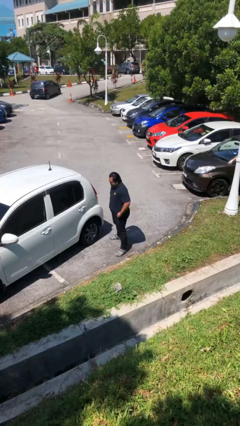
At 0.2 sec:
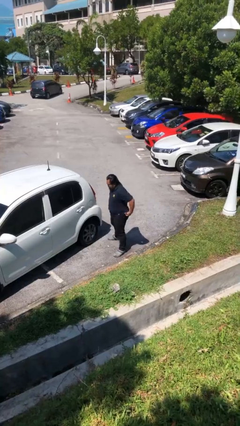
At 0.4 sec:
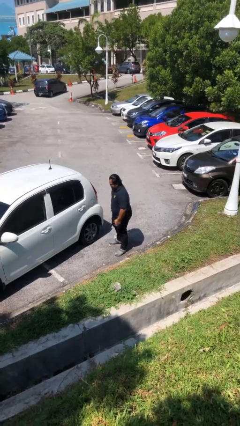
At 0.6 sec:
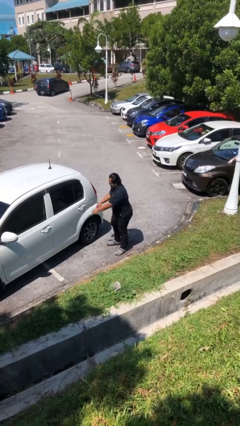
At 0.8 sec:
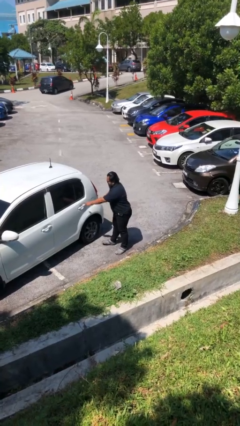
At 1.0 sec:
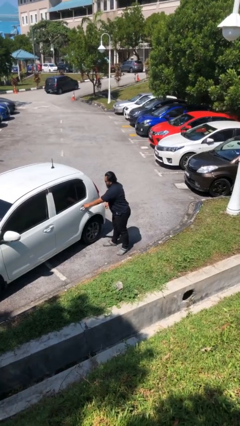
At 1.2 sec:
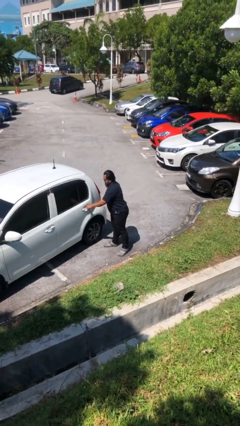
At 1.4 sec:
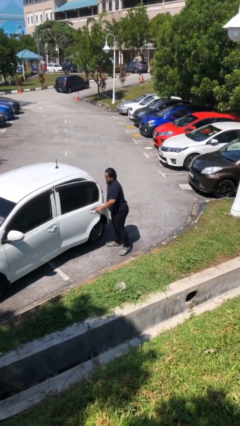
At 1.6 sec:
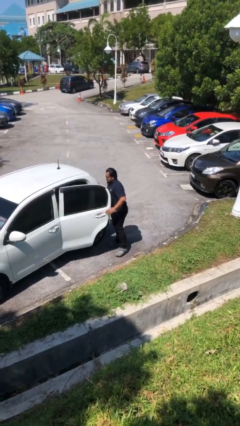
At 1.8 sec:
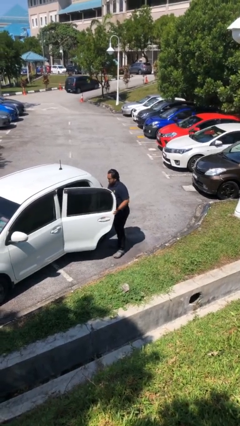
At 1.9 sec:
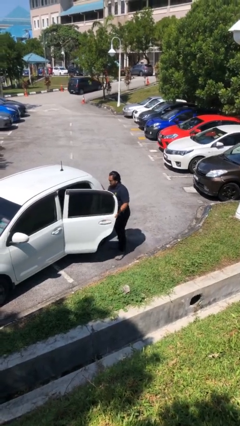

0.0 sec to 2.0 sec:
person opens car door

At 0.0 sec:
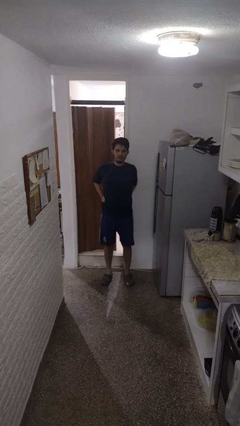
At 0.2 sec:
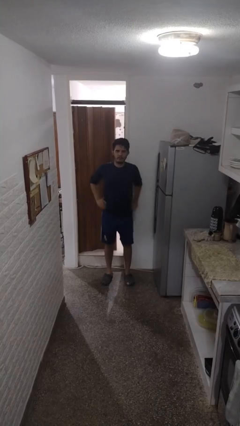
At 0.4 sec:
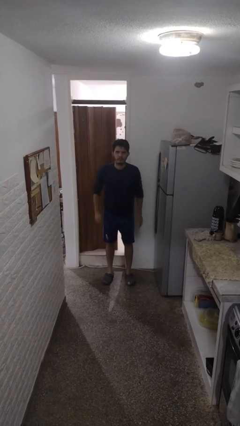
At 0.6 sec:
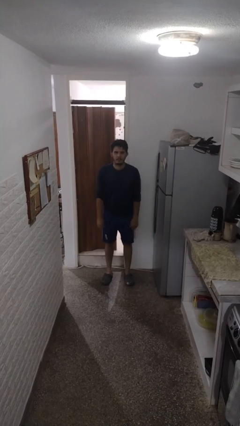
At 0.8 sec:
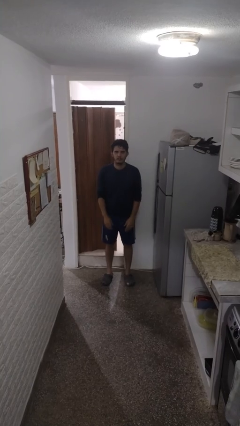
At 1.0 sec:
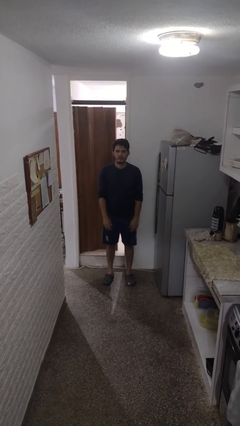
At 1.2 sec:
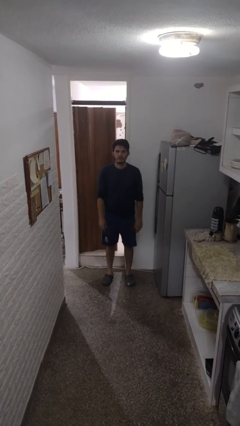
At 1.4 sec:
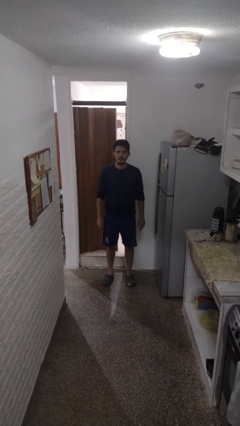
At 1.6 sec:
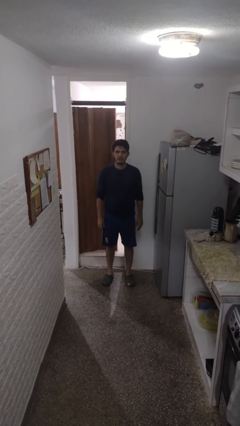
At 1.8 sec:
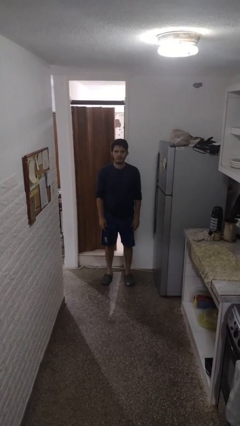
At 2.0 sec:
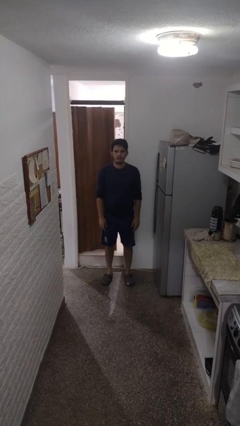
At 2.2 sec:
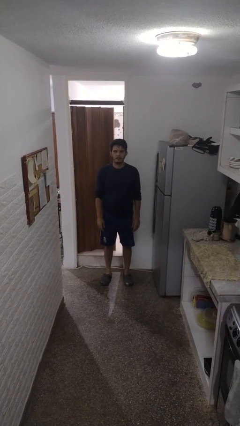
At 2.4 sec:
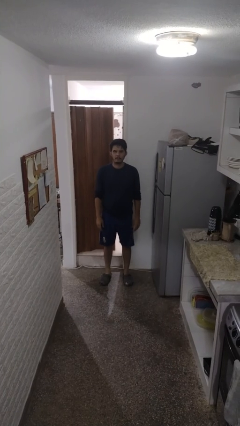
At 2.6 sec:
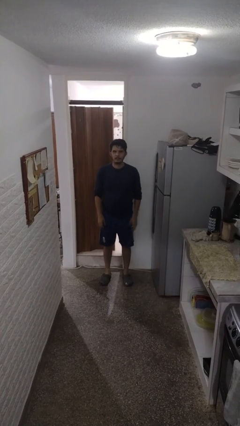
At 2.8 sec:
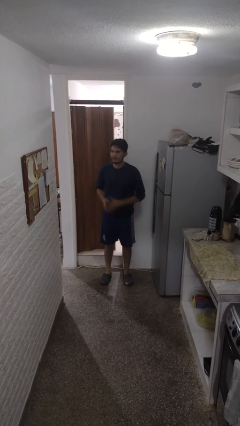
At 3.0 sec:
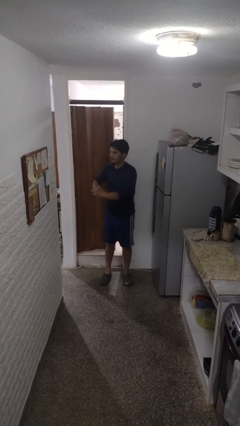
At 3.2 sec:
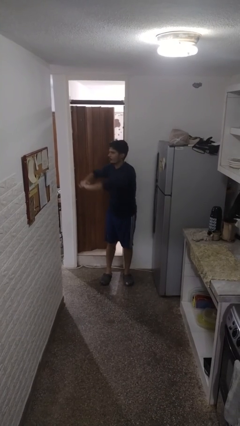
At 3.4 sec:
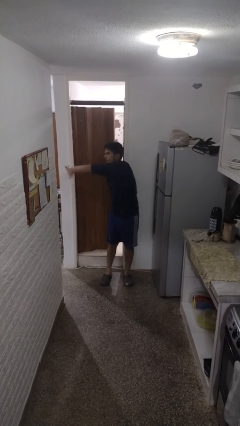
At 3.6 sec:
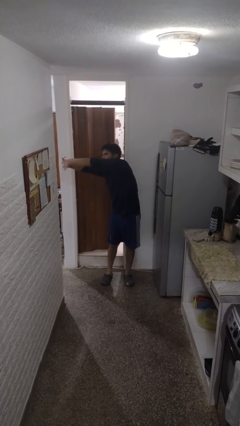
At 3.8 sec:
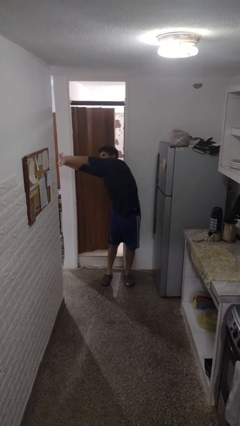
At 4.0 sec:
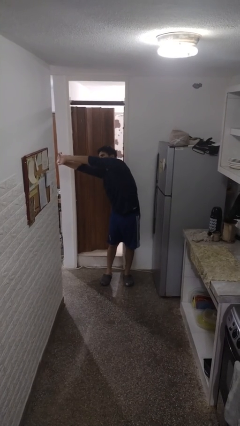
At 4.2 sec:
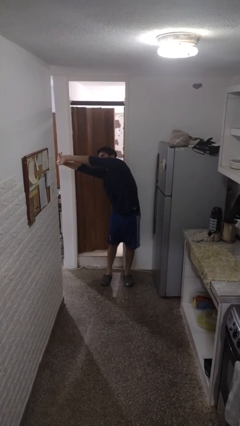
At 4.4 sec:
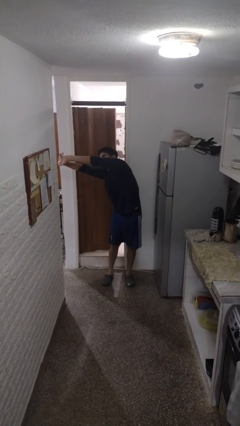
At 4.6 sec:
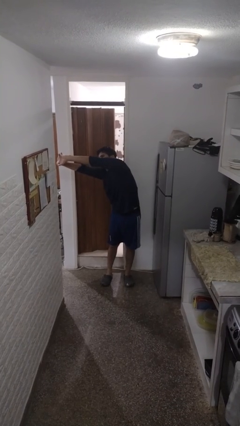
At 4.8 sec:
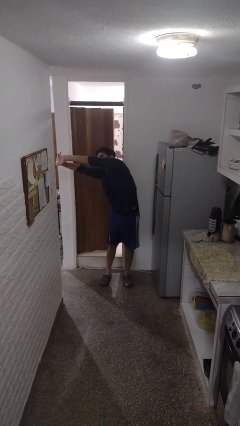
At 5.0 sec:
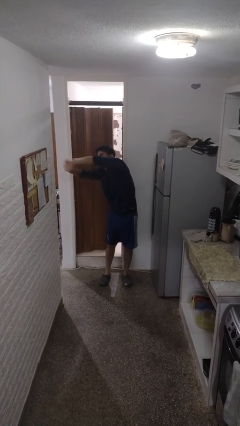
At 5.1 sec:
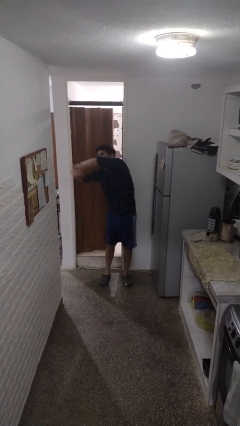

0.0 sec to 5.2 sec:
person stretches arms to side

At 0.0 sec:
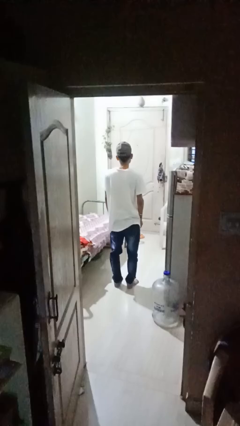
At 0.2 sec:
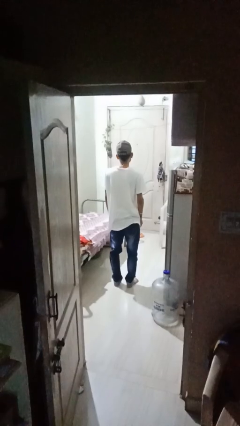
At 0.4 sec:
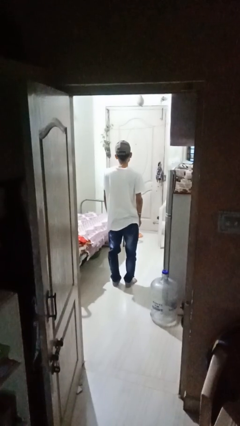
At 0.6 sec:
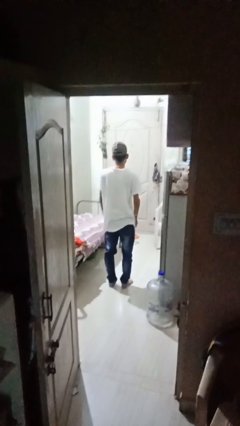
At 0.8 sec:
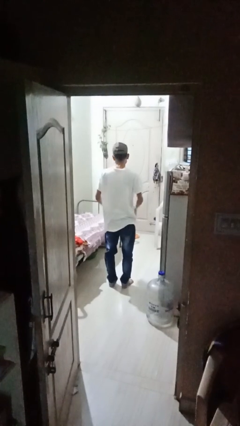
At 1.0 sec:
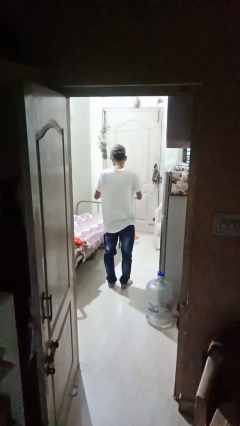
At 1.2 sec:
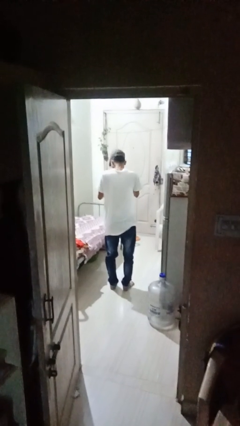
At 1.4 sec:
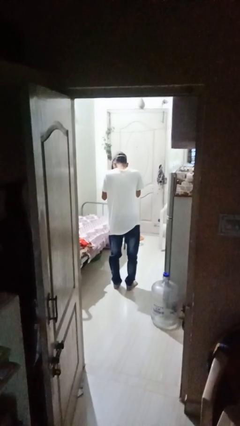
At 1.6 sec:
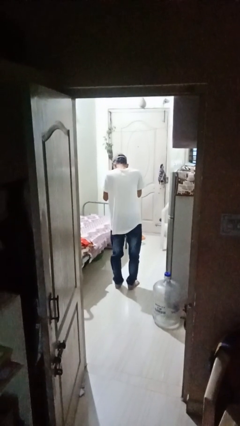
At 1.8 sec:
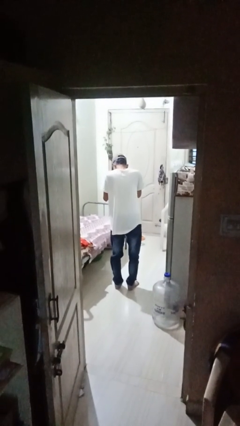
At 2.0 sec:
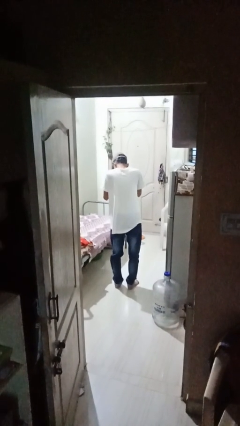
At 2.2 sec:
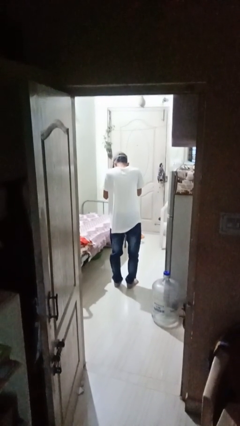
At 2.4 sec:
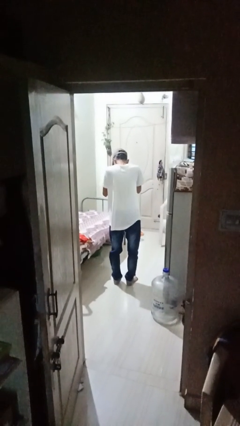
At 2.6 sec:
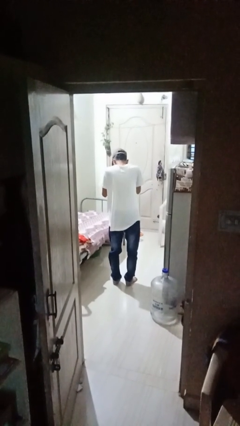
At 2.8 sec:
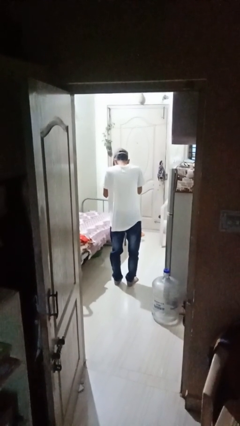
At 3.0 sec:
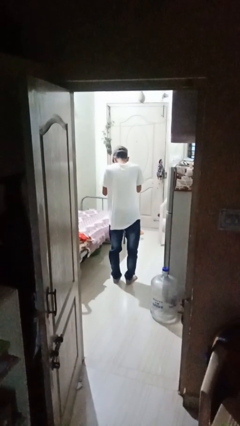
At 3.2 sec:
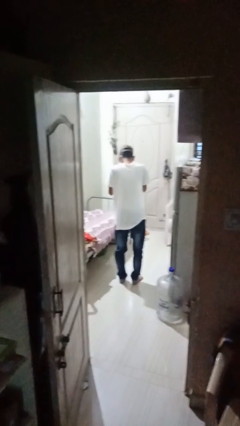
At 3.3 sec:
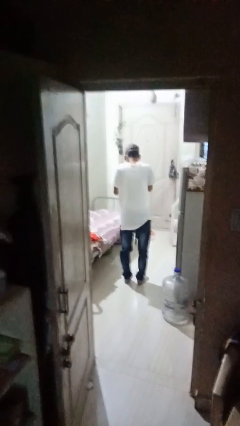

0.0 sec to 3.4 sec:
person prays

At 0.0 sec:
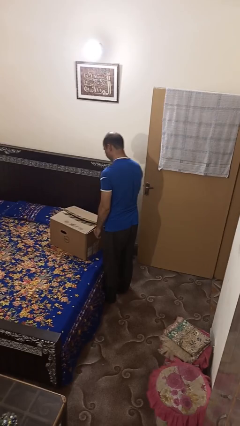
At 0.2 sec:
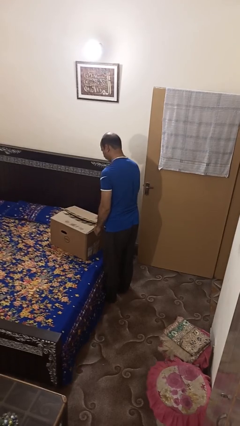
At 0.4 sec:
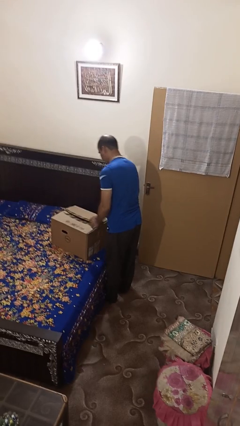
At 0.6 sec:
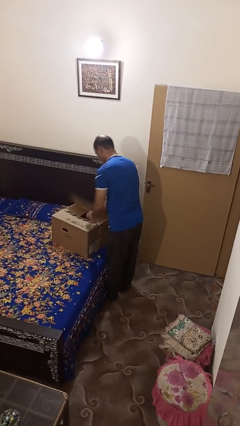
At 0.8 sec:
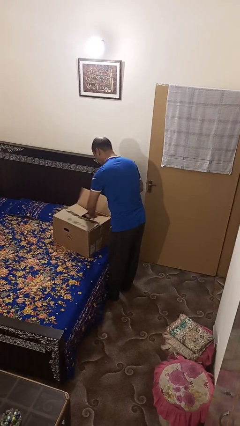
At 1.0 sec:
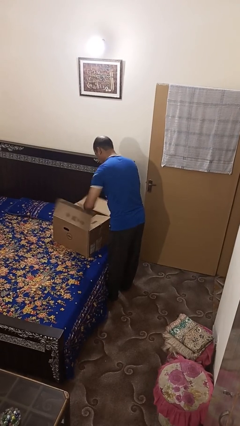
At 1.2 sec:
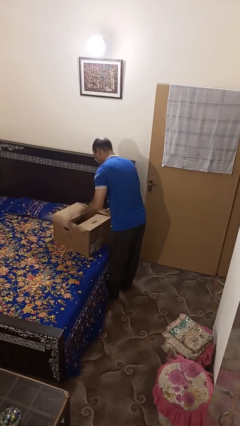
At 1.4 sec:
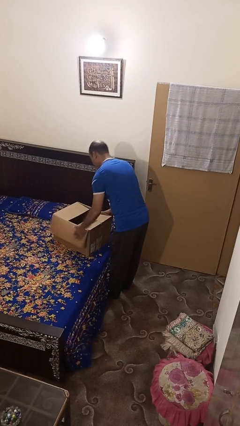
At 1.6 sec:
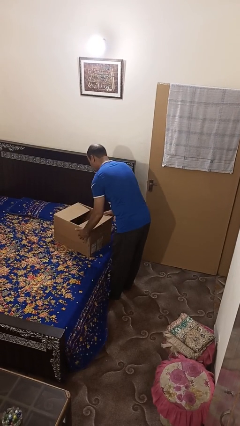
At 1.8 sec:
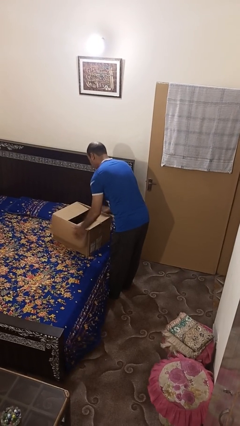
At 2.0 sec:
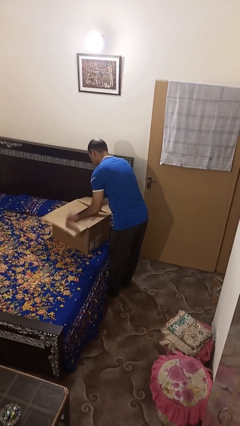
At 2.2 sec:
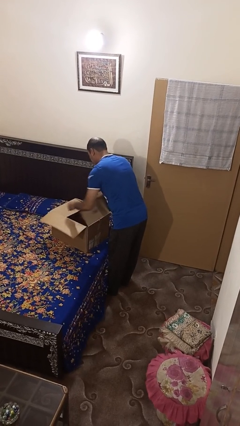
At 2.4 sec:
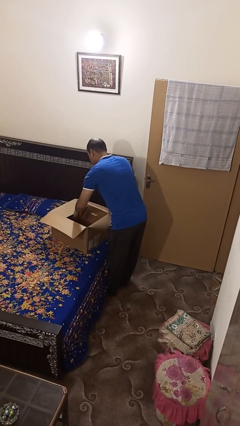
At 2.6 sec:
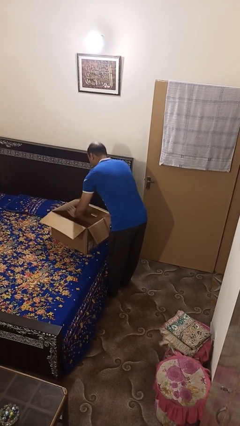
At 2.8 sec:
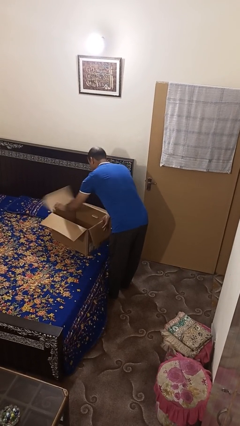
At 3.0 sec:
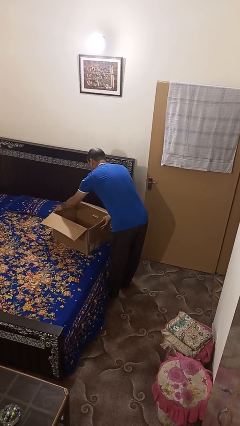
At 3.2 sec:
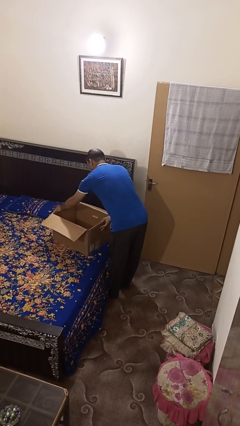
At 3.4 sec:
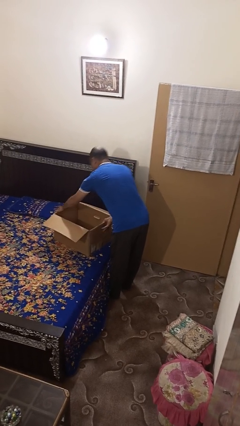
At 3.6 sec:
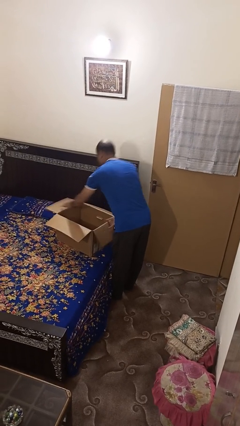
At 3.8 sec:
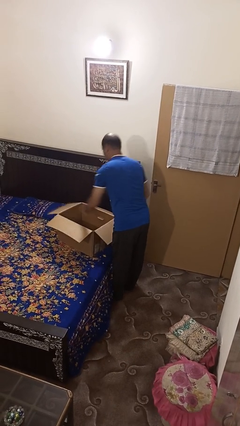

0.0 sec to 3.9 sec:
person opens box

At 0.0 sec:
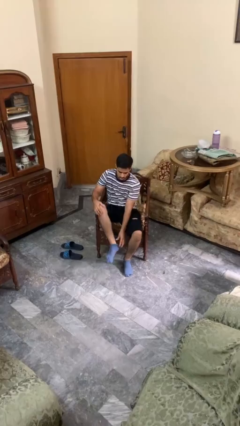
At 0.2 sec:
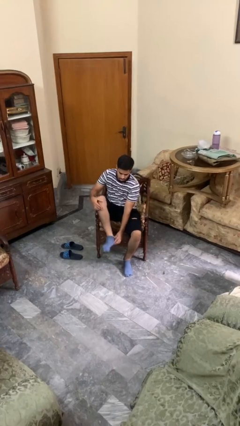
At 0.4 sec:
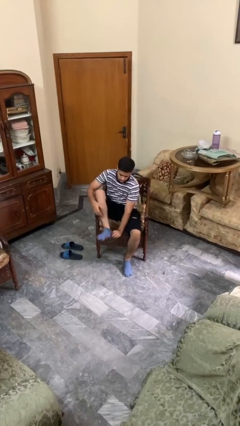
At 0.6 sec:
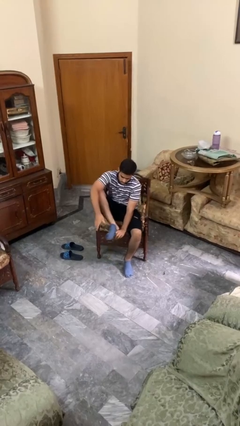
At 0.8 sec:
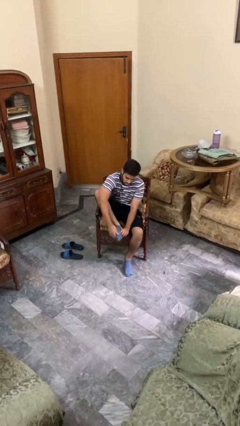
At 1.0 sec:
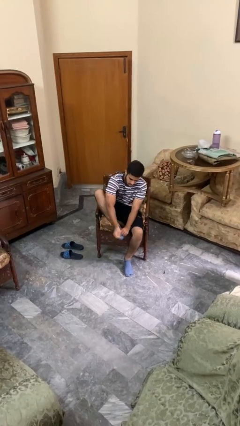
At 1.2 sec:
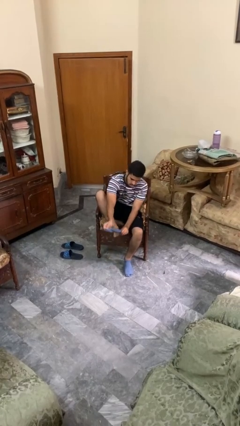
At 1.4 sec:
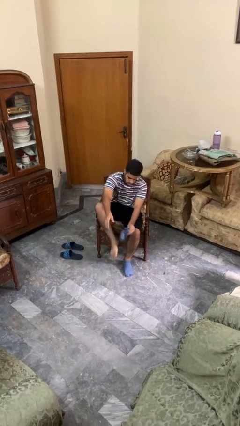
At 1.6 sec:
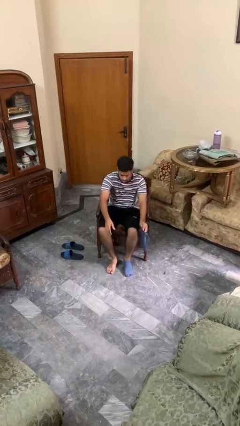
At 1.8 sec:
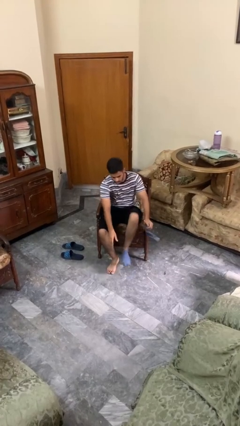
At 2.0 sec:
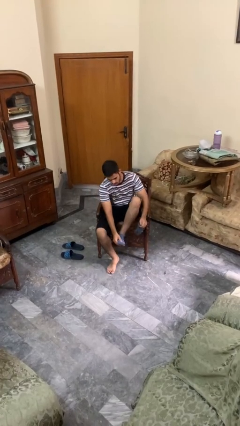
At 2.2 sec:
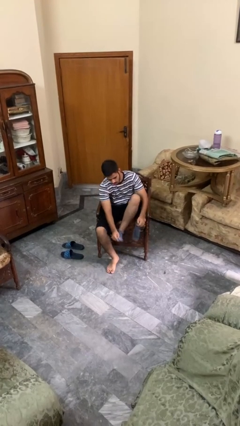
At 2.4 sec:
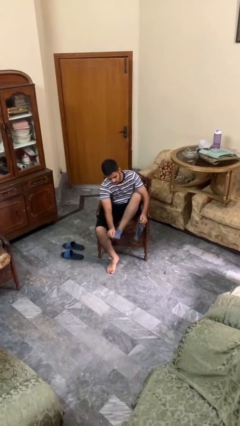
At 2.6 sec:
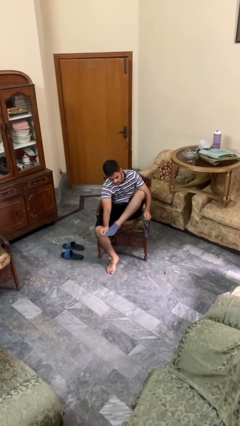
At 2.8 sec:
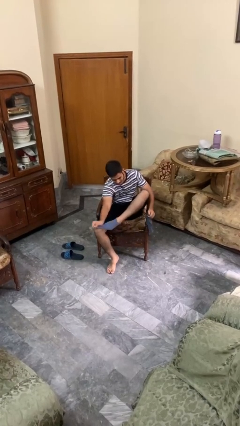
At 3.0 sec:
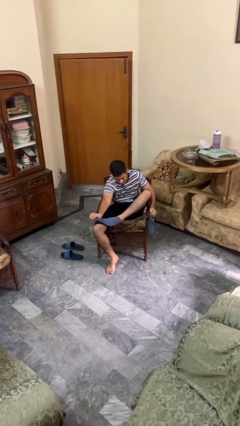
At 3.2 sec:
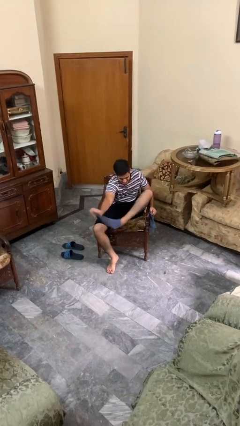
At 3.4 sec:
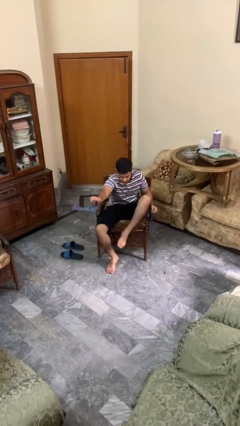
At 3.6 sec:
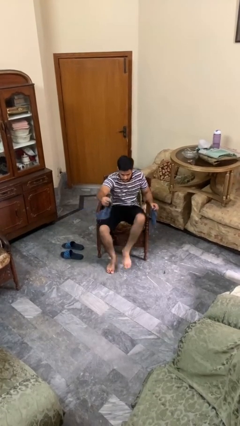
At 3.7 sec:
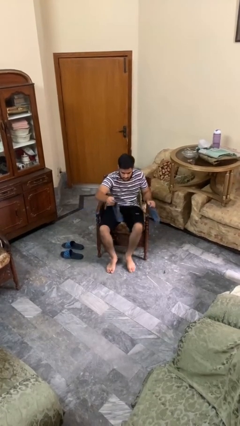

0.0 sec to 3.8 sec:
person takes off socks
